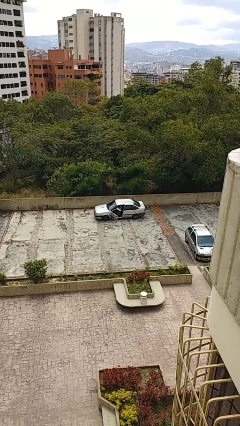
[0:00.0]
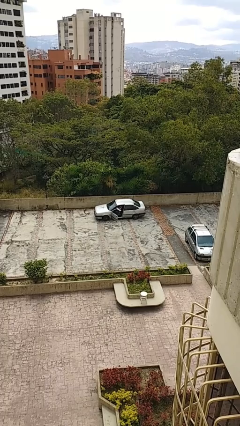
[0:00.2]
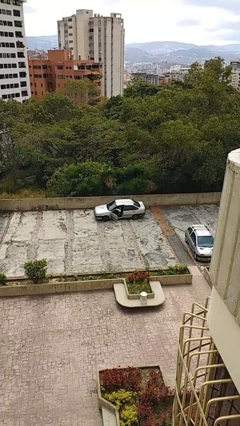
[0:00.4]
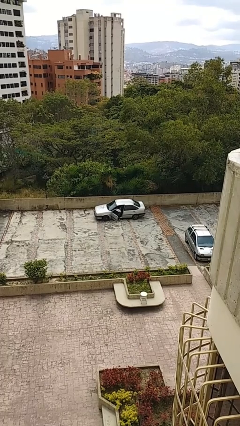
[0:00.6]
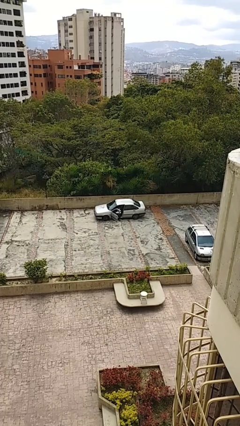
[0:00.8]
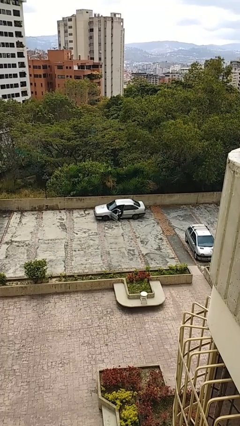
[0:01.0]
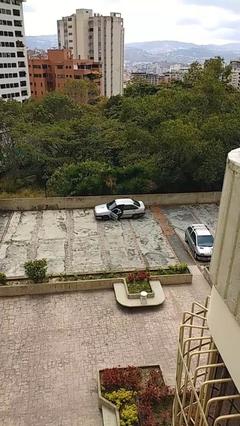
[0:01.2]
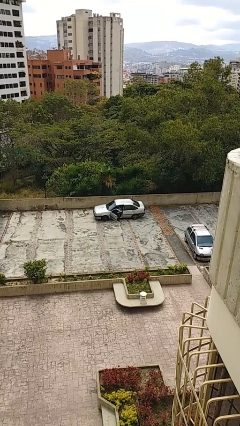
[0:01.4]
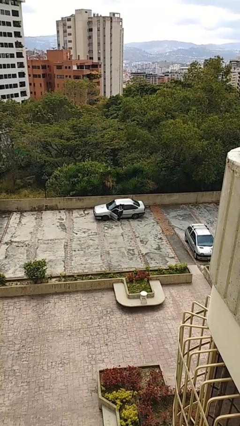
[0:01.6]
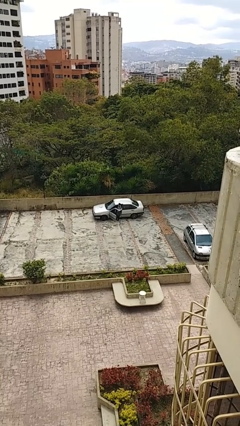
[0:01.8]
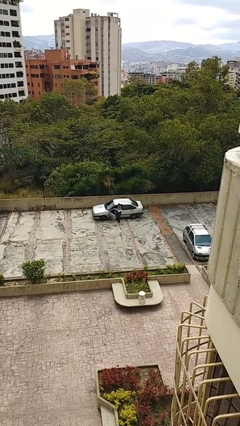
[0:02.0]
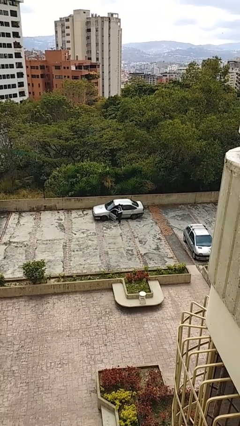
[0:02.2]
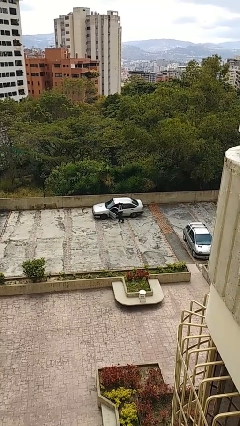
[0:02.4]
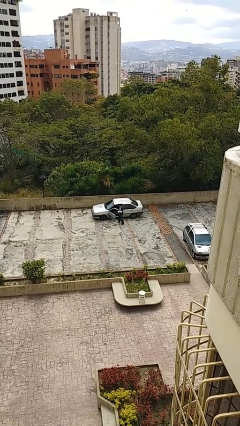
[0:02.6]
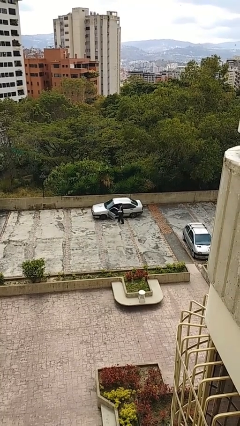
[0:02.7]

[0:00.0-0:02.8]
person exits car

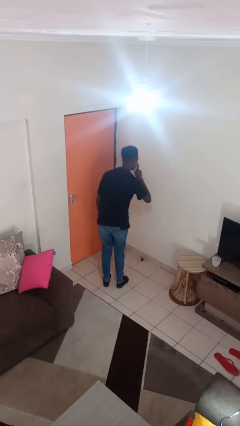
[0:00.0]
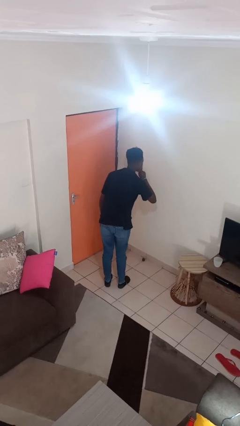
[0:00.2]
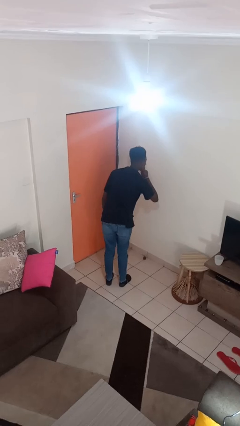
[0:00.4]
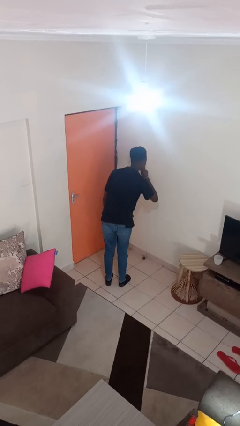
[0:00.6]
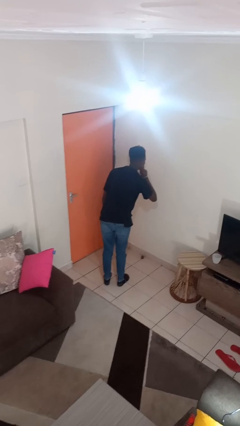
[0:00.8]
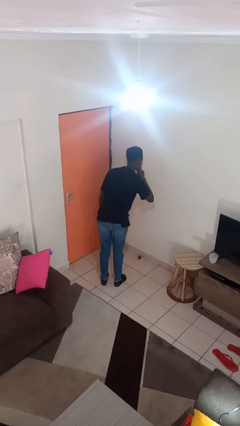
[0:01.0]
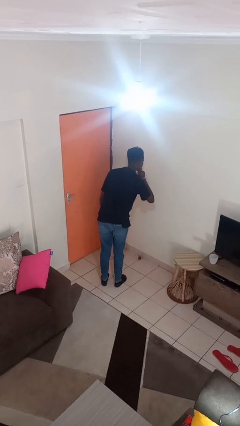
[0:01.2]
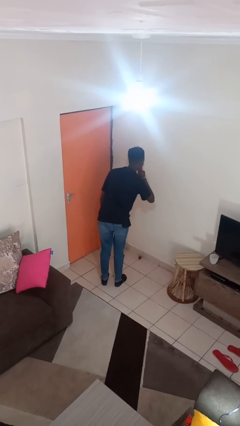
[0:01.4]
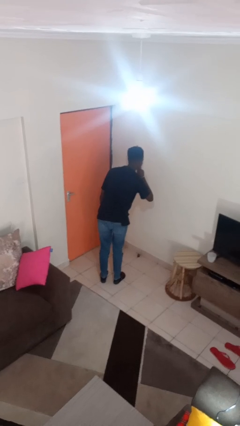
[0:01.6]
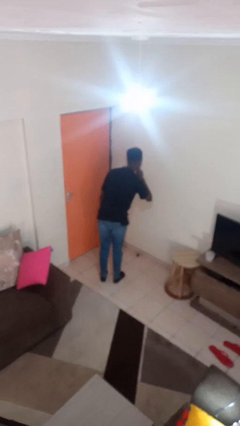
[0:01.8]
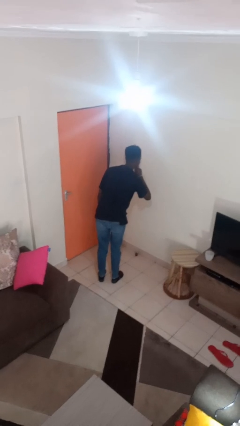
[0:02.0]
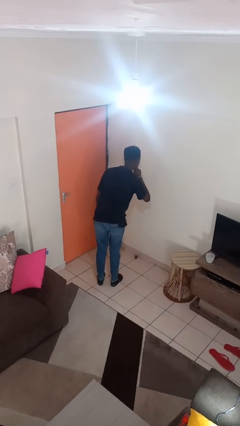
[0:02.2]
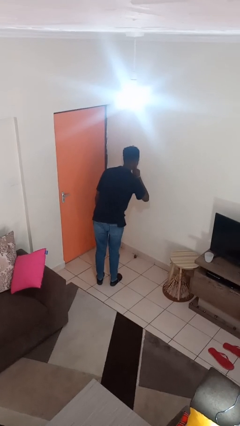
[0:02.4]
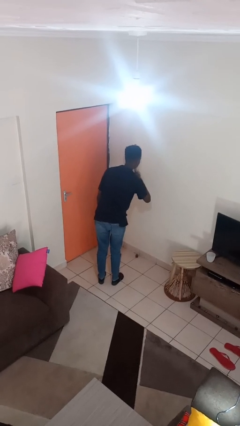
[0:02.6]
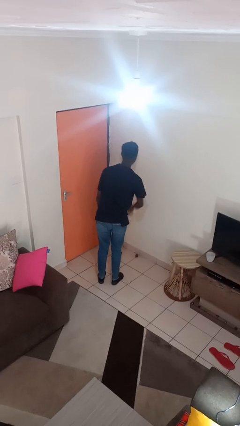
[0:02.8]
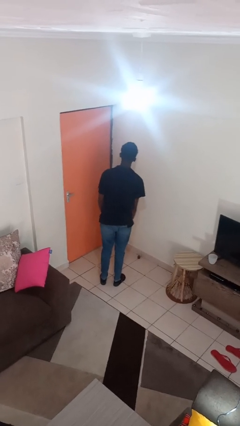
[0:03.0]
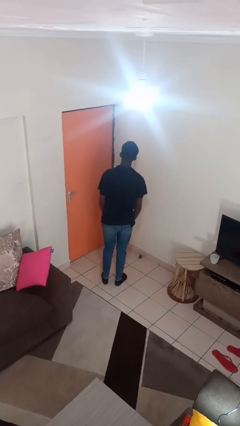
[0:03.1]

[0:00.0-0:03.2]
person gestures be quiet

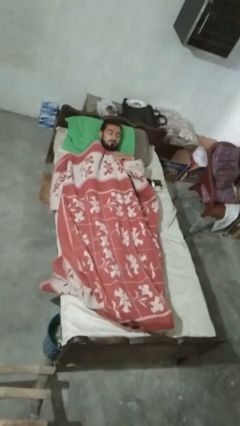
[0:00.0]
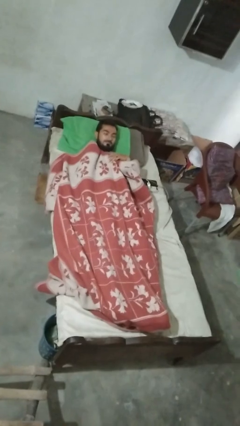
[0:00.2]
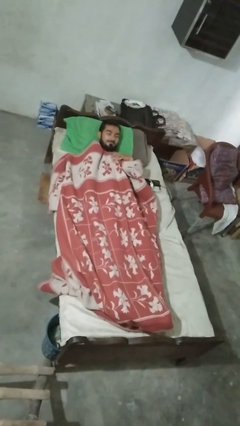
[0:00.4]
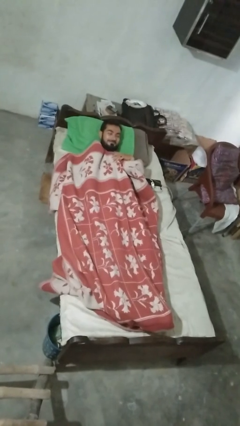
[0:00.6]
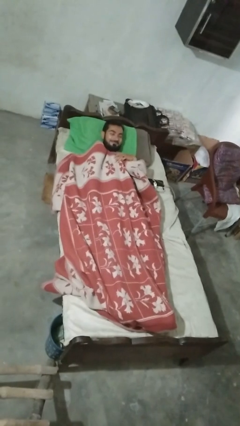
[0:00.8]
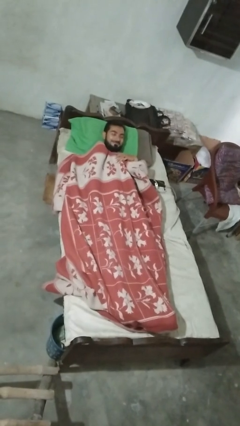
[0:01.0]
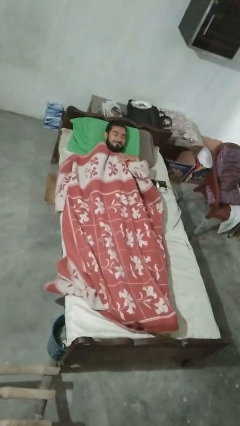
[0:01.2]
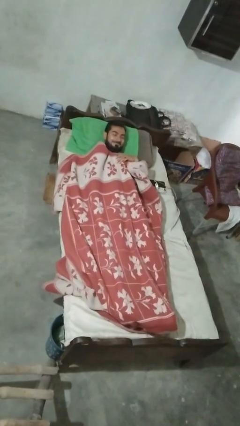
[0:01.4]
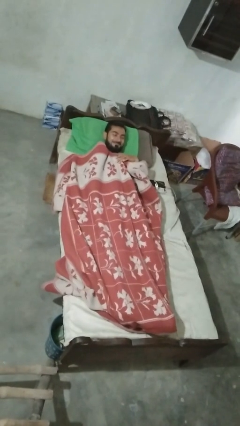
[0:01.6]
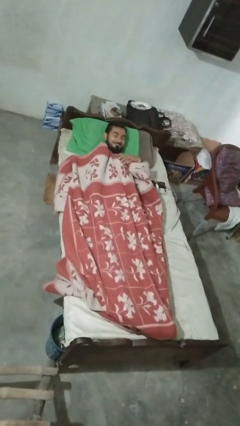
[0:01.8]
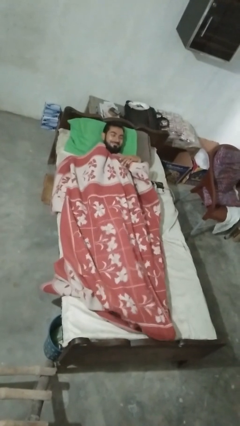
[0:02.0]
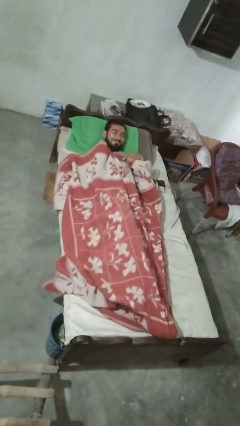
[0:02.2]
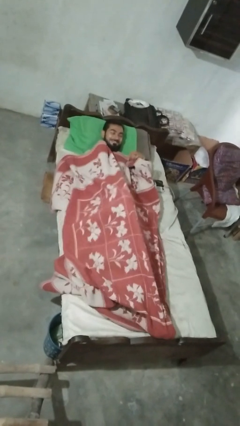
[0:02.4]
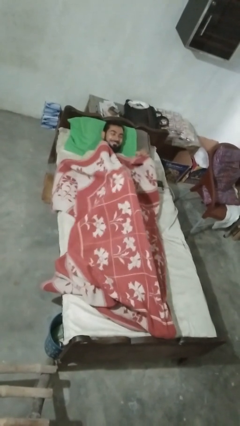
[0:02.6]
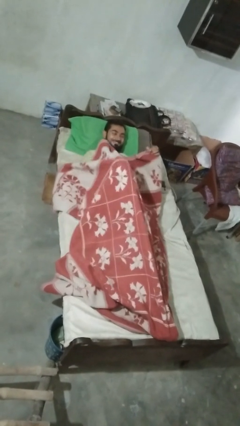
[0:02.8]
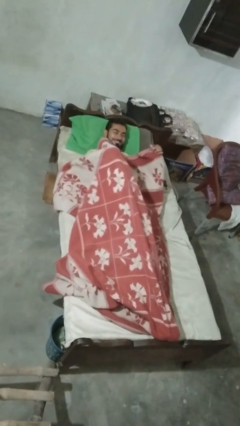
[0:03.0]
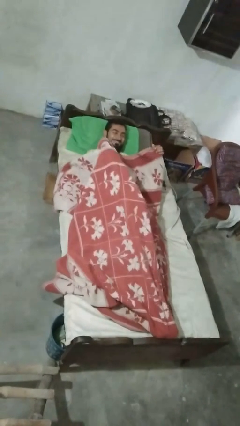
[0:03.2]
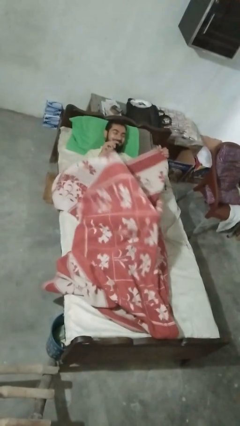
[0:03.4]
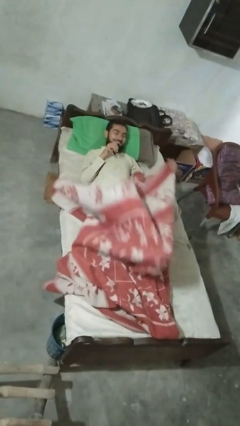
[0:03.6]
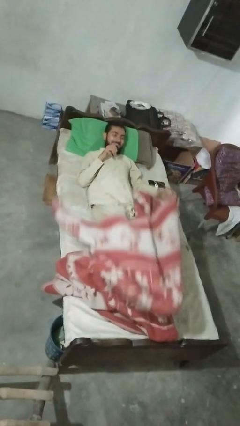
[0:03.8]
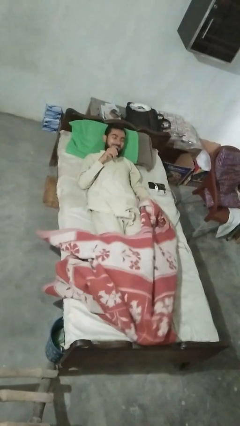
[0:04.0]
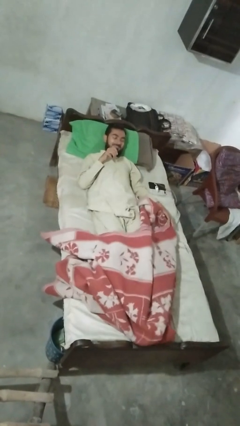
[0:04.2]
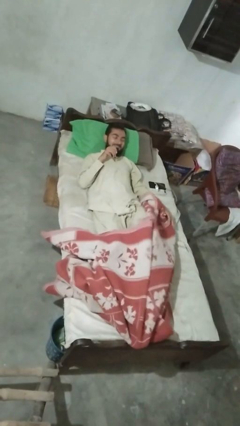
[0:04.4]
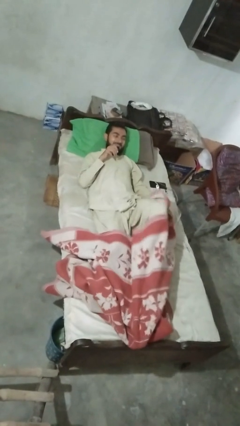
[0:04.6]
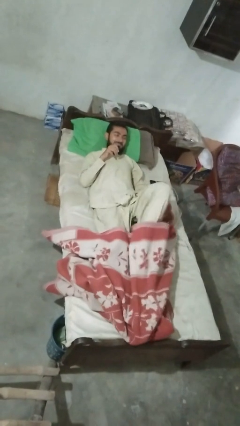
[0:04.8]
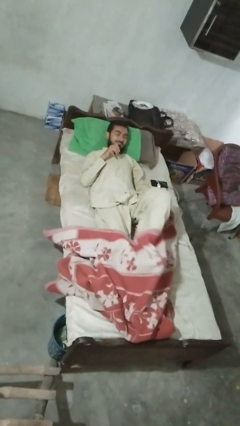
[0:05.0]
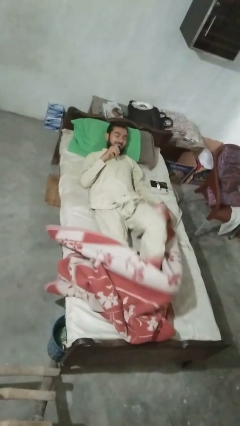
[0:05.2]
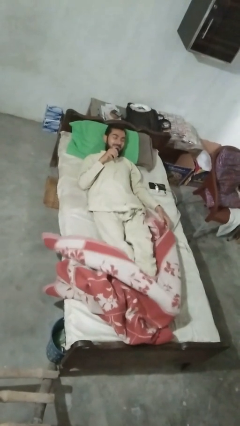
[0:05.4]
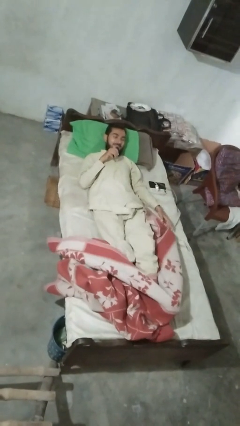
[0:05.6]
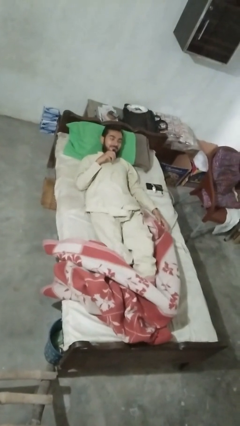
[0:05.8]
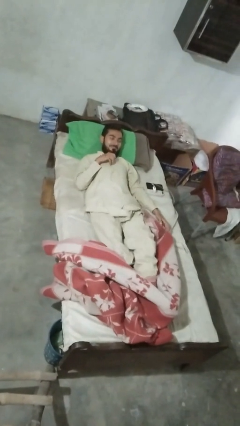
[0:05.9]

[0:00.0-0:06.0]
person uncovers with bedsheets

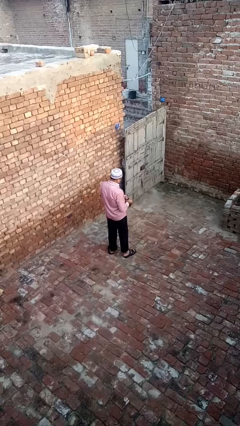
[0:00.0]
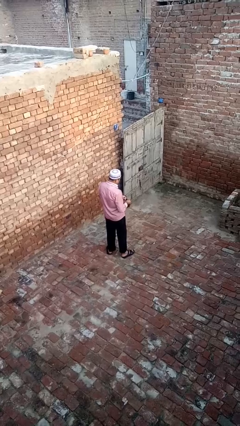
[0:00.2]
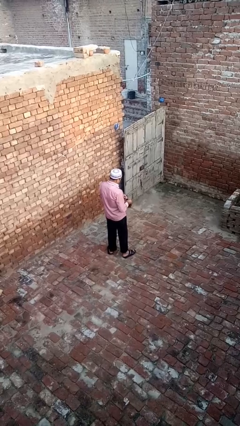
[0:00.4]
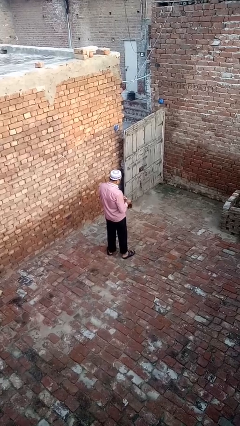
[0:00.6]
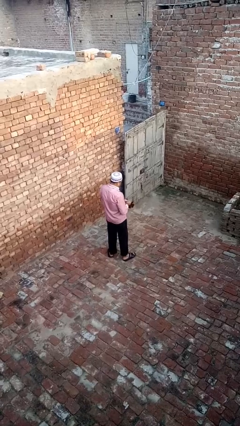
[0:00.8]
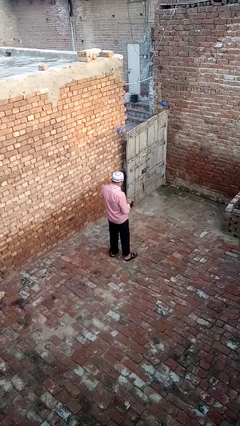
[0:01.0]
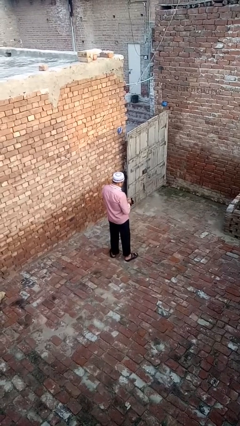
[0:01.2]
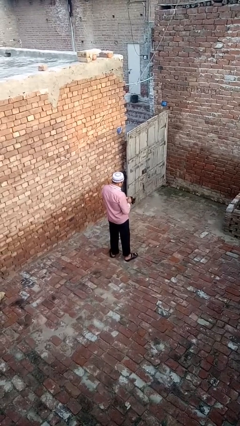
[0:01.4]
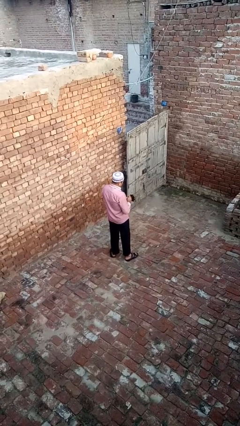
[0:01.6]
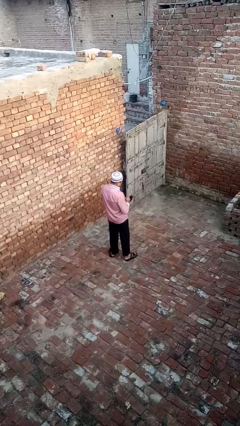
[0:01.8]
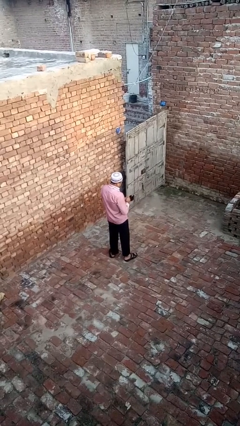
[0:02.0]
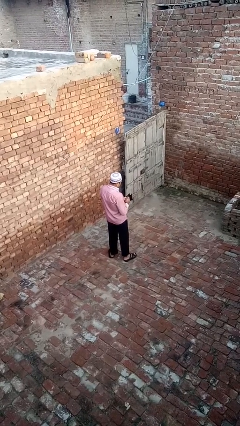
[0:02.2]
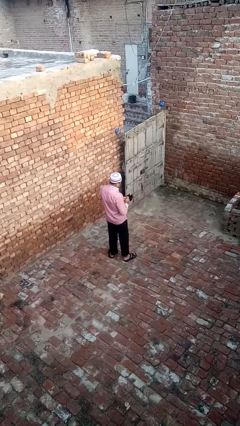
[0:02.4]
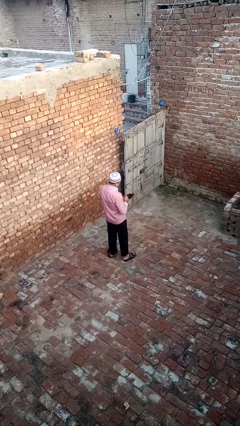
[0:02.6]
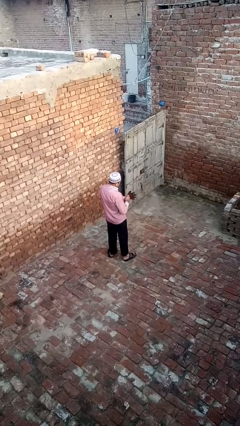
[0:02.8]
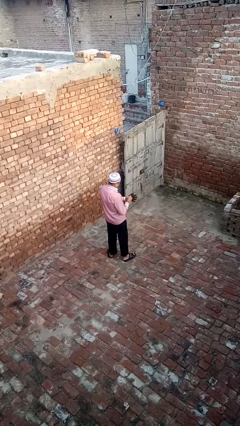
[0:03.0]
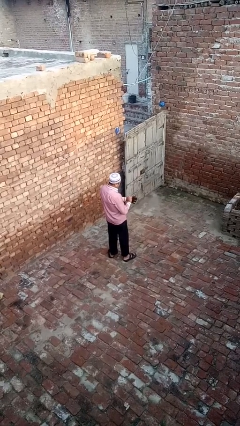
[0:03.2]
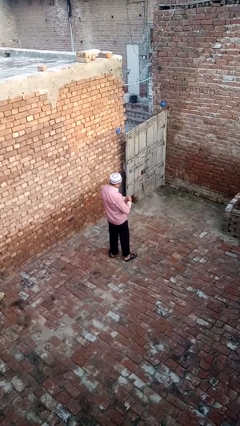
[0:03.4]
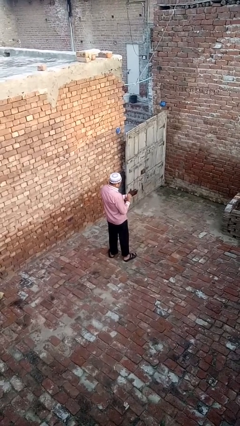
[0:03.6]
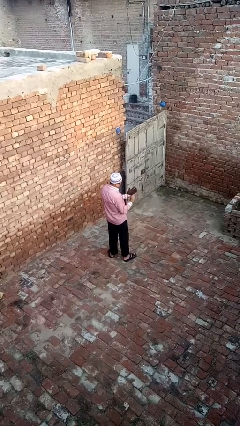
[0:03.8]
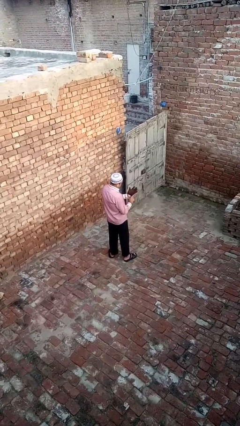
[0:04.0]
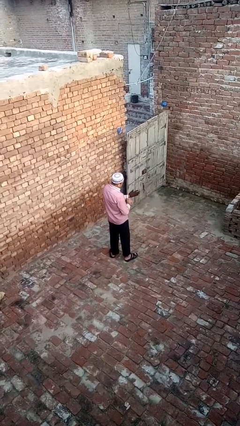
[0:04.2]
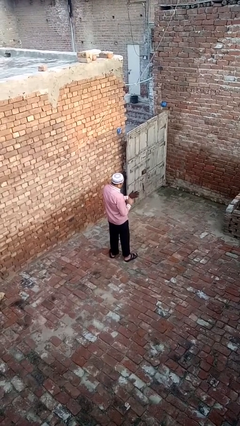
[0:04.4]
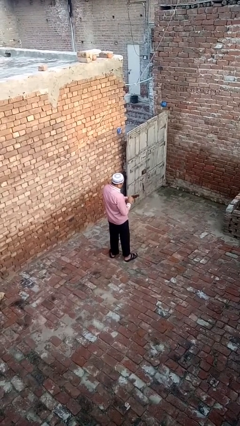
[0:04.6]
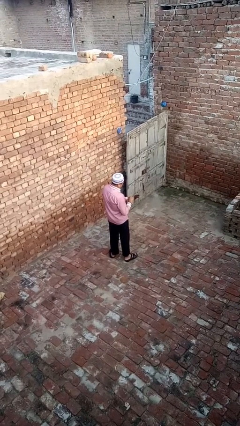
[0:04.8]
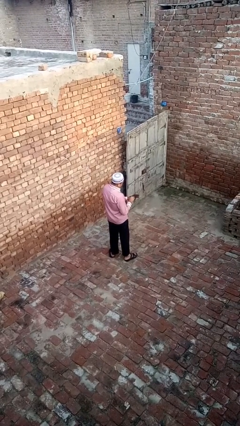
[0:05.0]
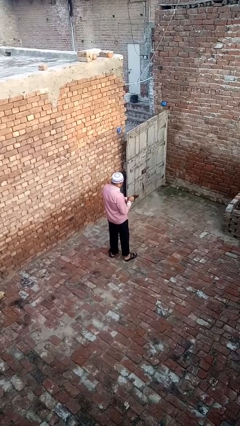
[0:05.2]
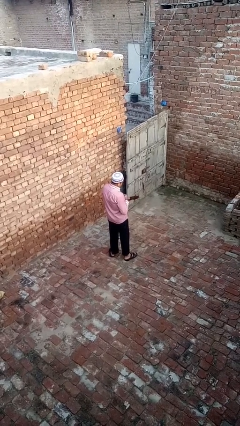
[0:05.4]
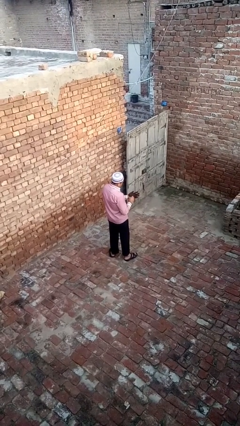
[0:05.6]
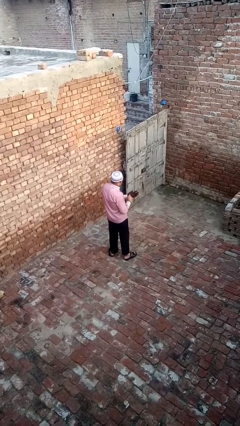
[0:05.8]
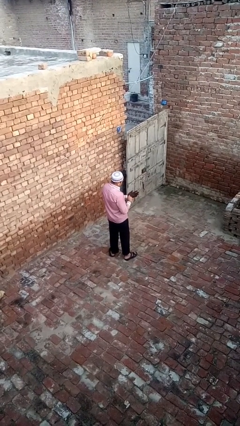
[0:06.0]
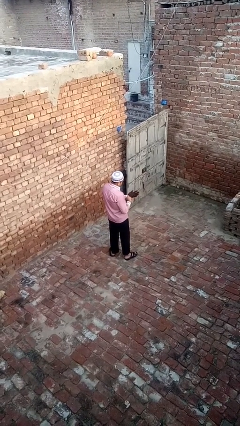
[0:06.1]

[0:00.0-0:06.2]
person puts on gloves
